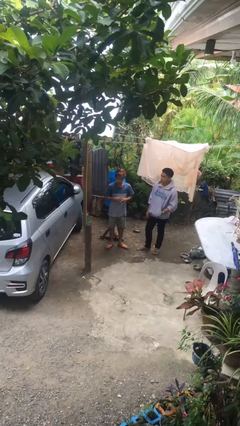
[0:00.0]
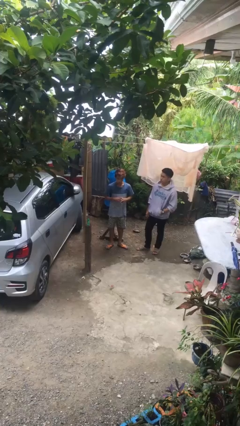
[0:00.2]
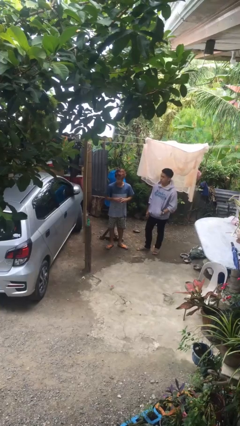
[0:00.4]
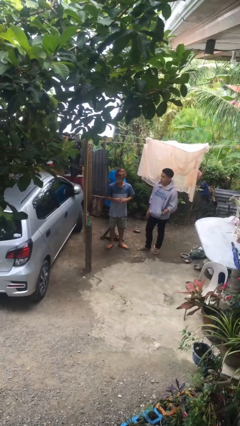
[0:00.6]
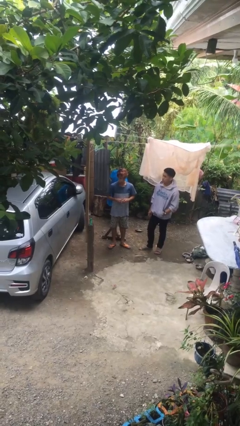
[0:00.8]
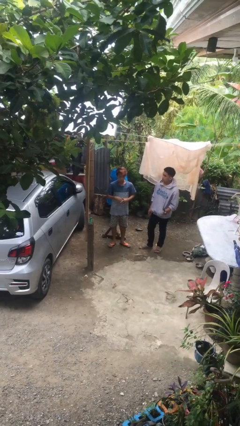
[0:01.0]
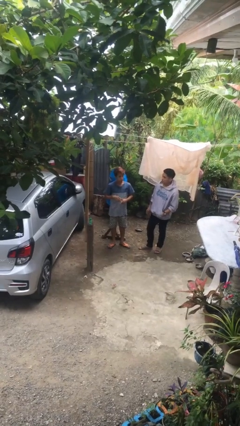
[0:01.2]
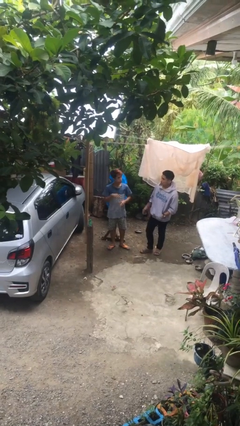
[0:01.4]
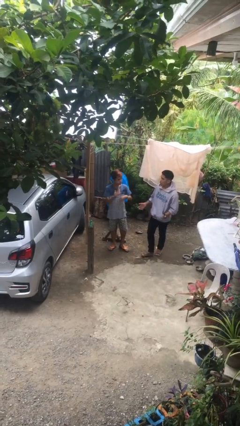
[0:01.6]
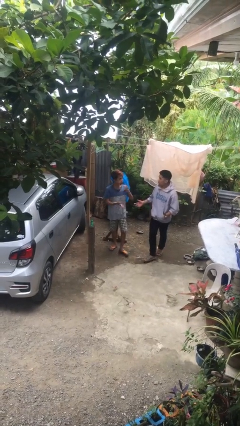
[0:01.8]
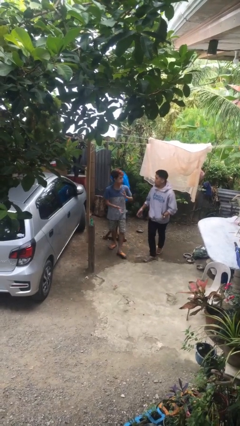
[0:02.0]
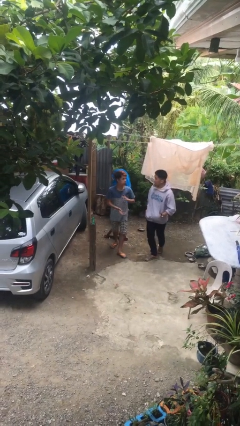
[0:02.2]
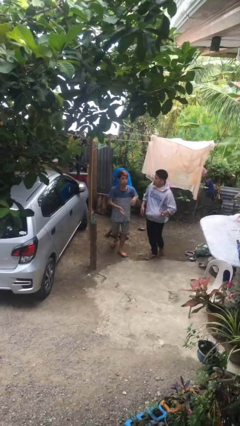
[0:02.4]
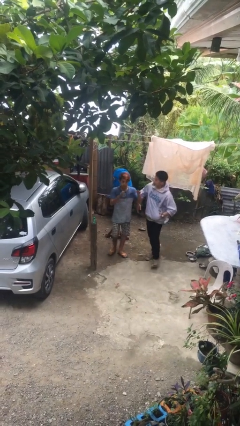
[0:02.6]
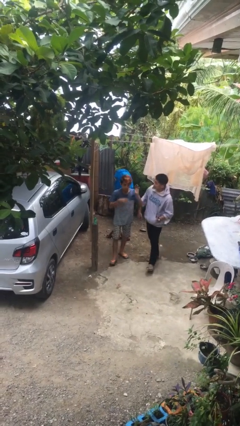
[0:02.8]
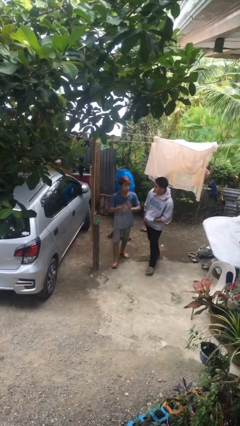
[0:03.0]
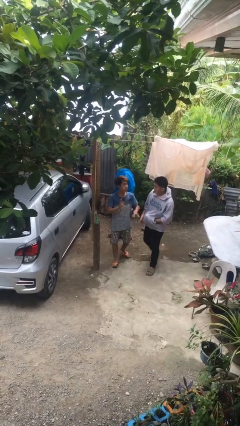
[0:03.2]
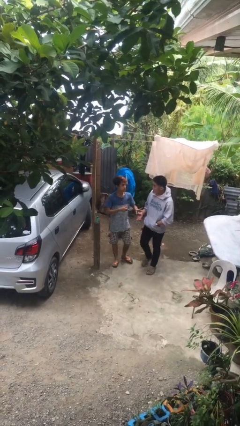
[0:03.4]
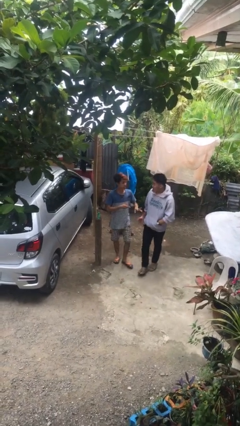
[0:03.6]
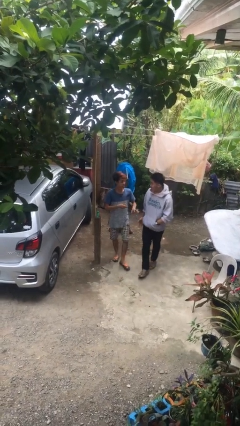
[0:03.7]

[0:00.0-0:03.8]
person talks to person

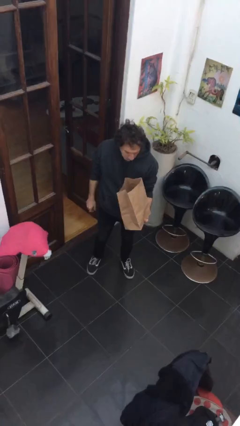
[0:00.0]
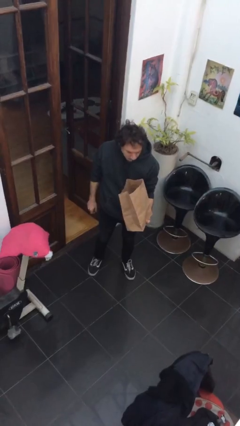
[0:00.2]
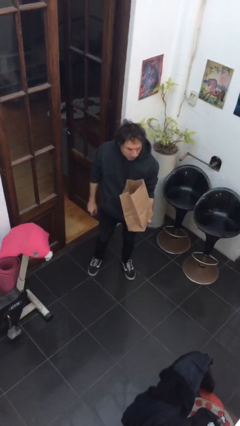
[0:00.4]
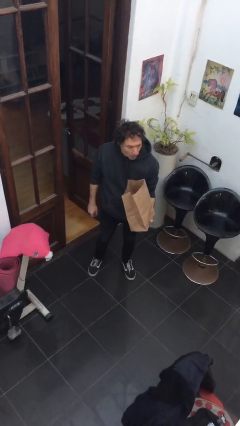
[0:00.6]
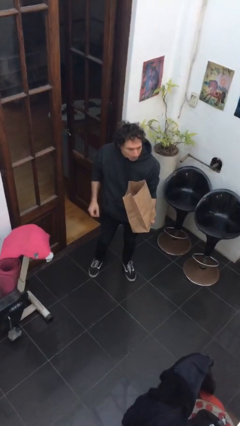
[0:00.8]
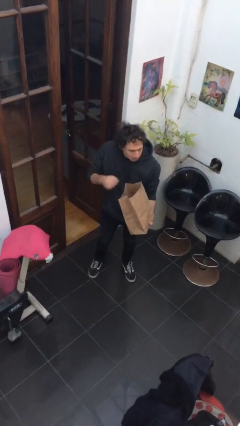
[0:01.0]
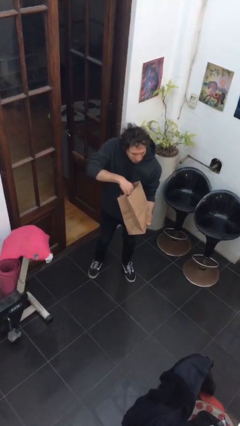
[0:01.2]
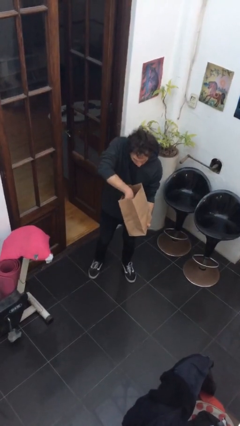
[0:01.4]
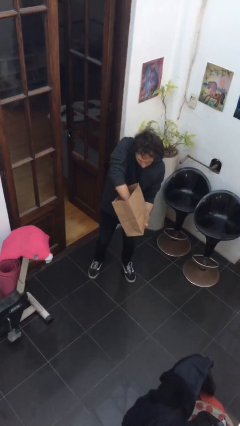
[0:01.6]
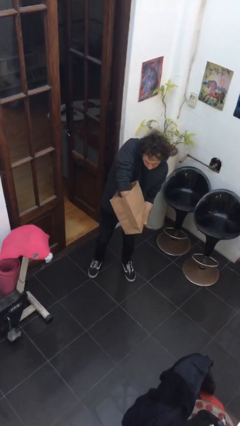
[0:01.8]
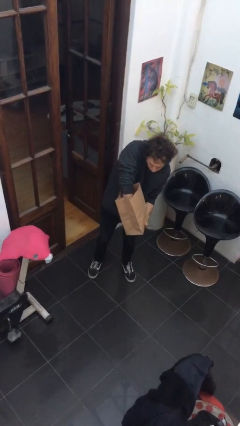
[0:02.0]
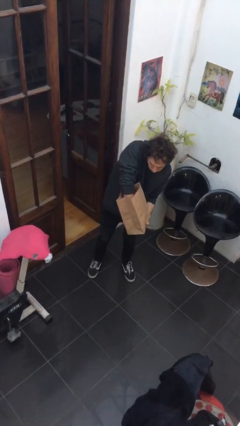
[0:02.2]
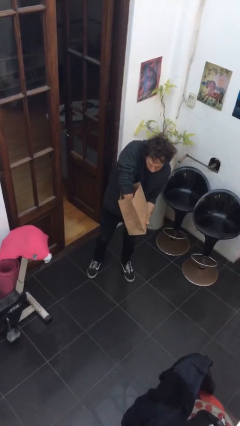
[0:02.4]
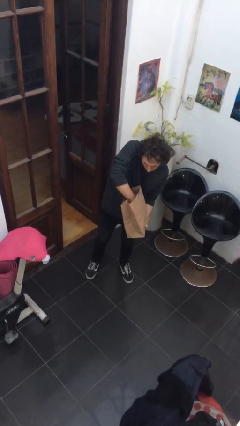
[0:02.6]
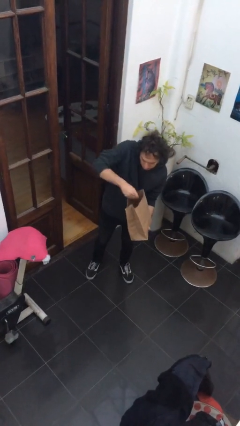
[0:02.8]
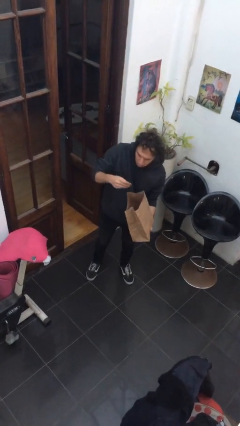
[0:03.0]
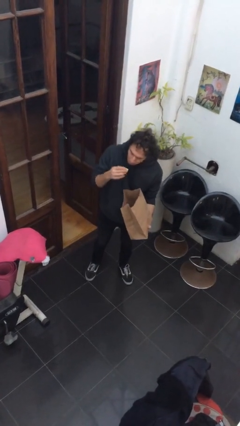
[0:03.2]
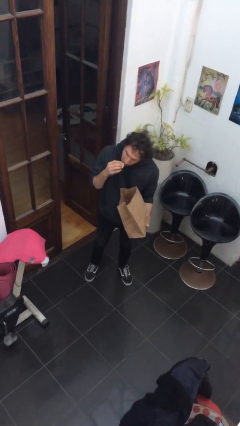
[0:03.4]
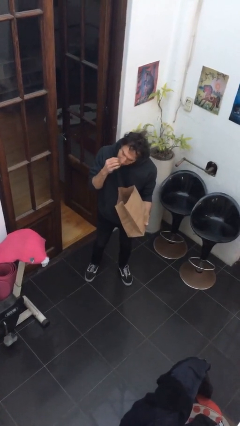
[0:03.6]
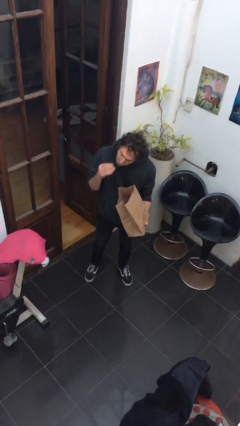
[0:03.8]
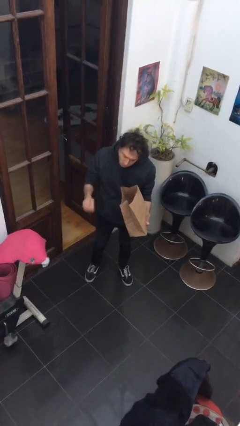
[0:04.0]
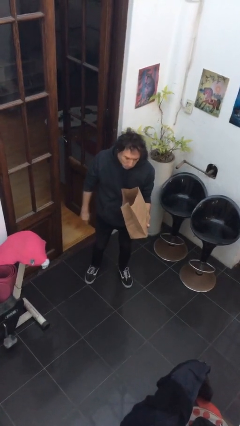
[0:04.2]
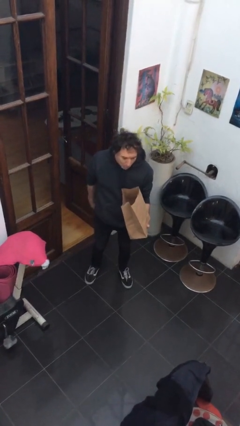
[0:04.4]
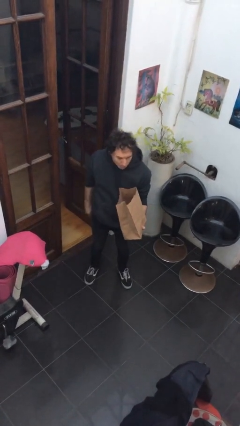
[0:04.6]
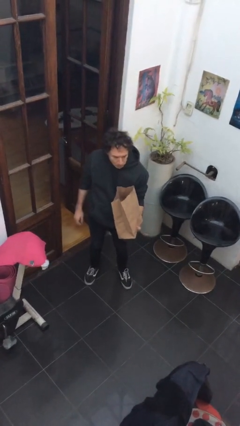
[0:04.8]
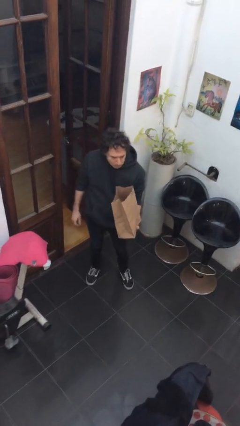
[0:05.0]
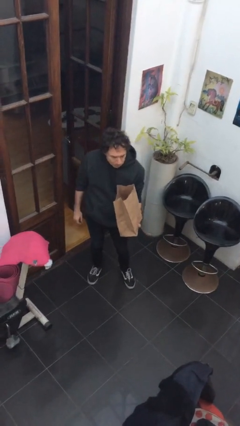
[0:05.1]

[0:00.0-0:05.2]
person eats snack from bag

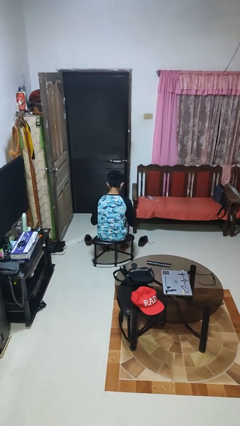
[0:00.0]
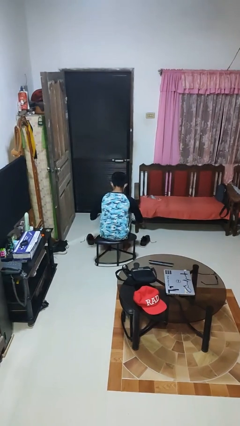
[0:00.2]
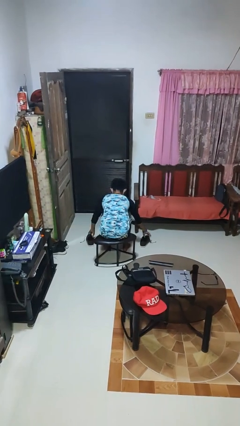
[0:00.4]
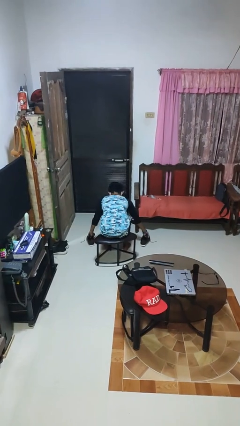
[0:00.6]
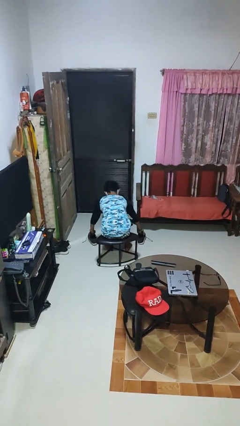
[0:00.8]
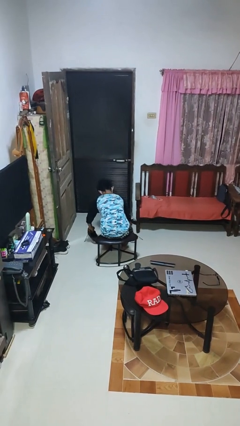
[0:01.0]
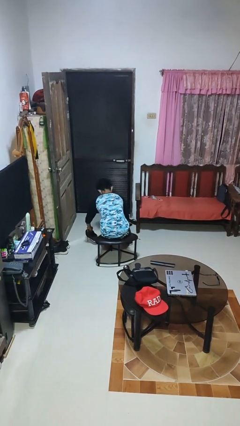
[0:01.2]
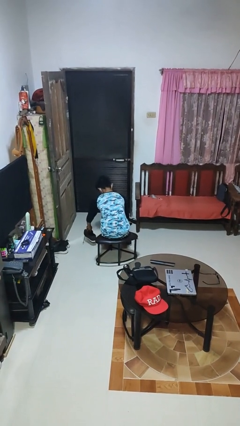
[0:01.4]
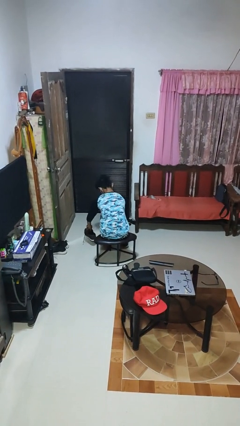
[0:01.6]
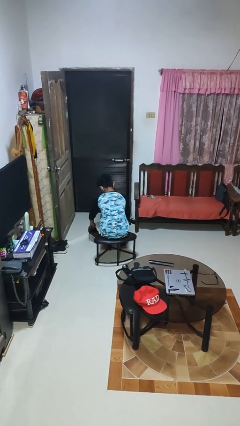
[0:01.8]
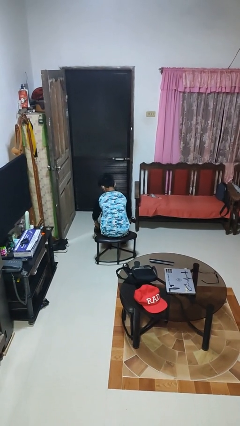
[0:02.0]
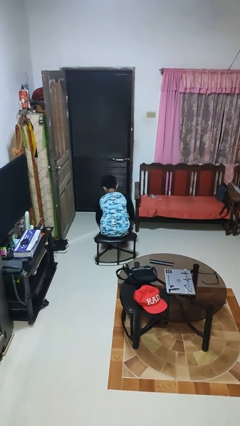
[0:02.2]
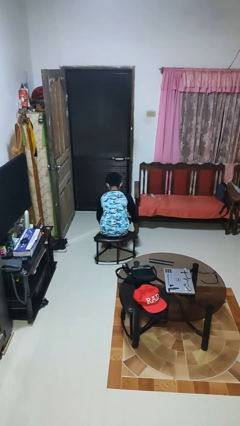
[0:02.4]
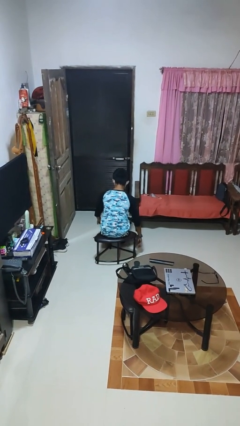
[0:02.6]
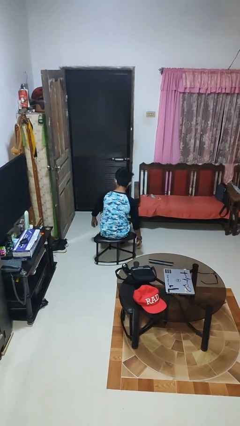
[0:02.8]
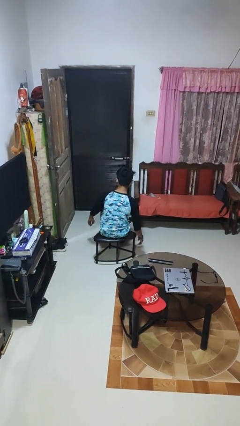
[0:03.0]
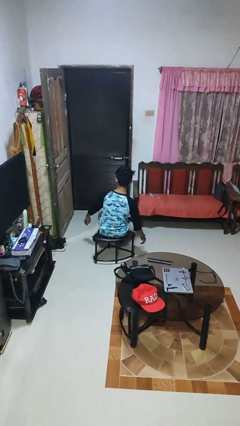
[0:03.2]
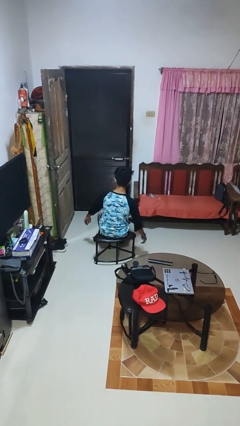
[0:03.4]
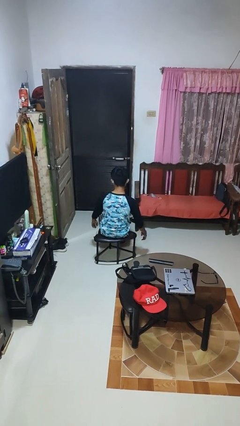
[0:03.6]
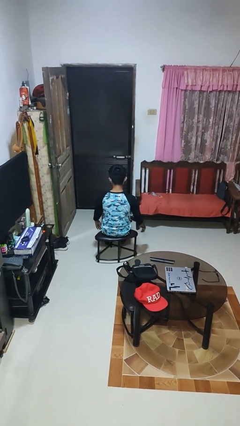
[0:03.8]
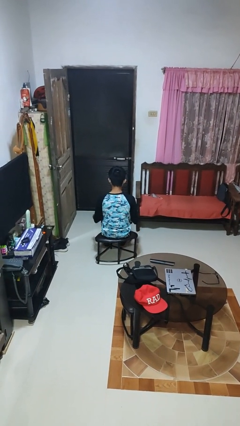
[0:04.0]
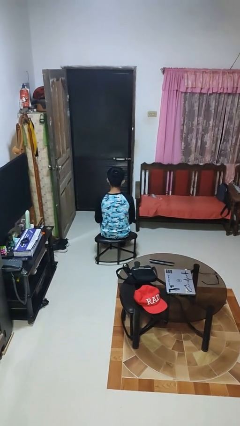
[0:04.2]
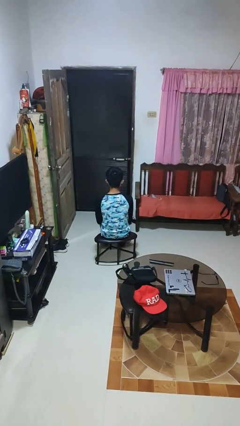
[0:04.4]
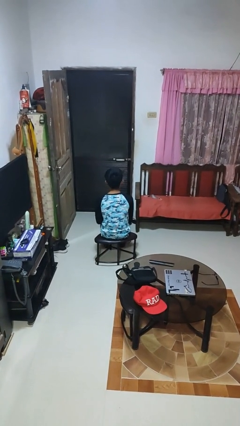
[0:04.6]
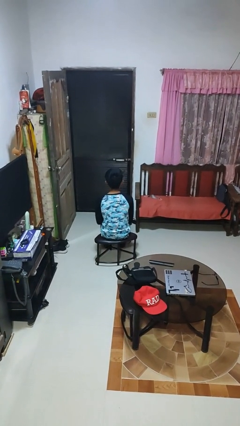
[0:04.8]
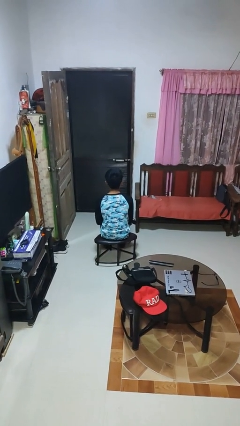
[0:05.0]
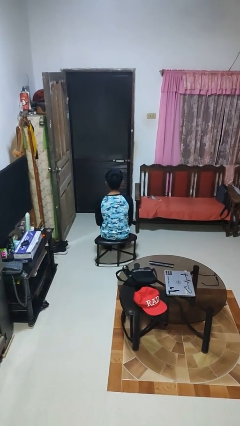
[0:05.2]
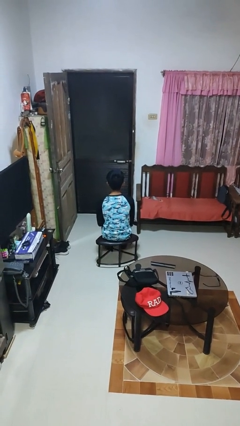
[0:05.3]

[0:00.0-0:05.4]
person puts on shoes

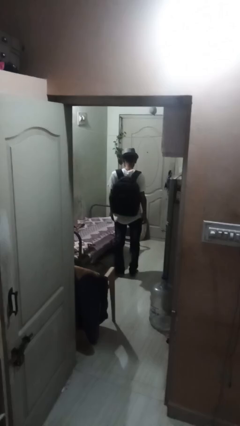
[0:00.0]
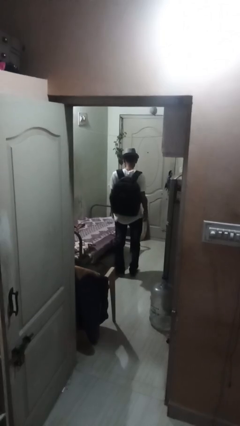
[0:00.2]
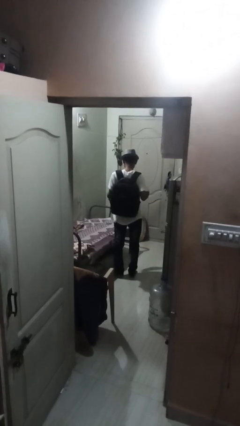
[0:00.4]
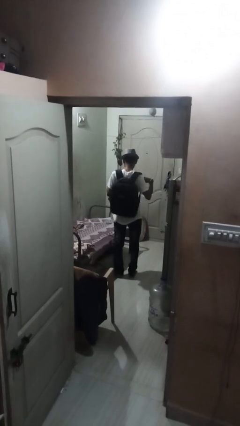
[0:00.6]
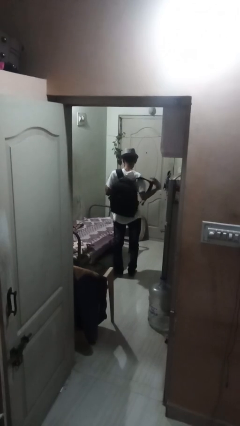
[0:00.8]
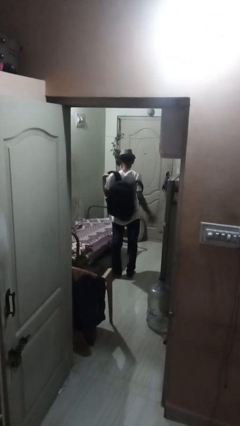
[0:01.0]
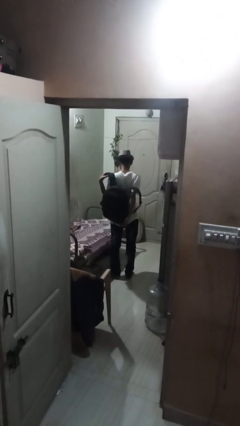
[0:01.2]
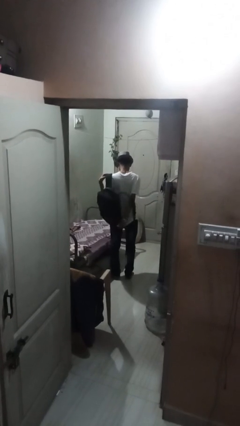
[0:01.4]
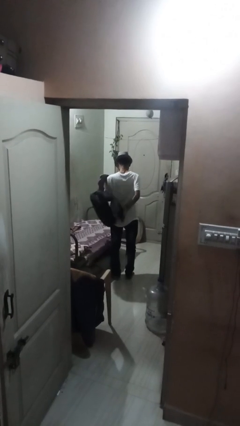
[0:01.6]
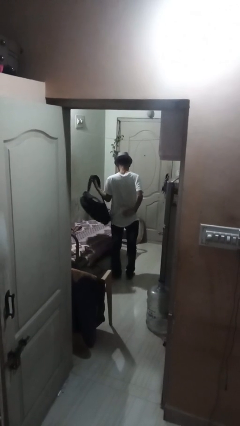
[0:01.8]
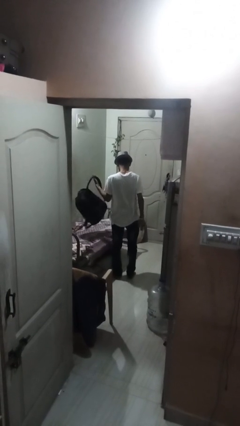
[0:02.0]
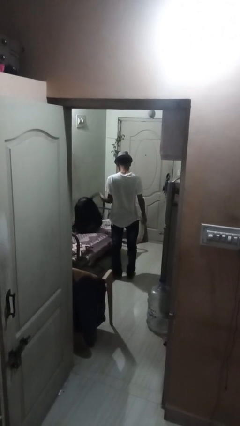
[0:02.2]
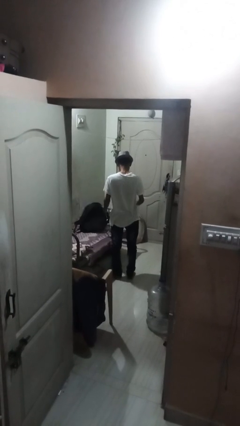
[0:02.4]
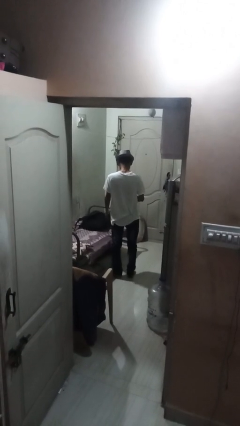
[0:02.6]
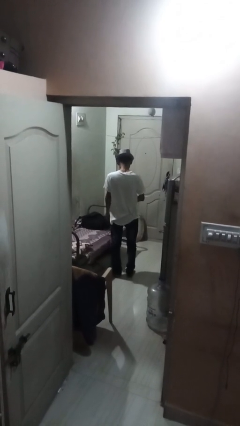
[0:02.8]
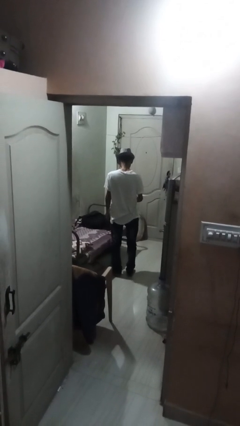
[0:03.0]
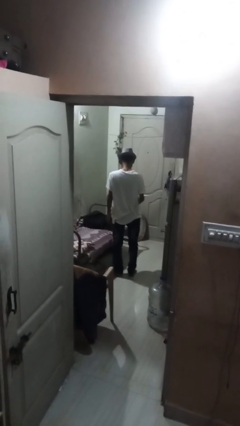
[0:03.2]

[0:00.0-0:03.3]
person takes off backpack

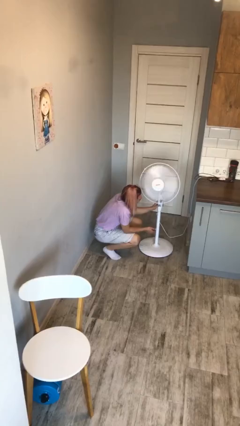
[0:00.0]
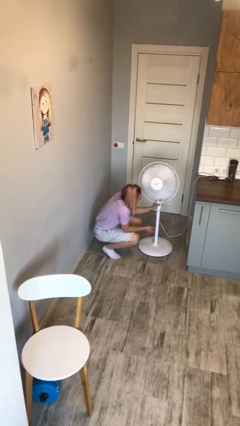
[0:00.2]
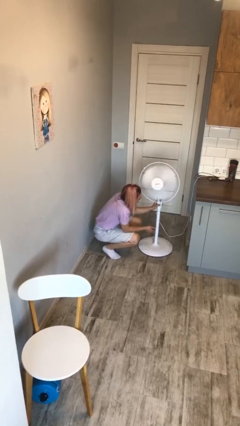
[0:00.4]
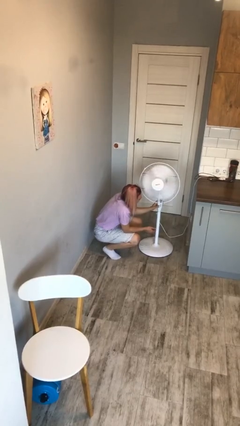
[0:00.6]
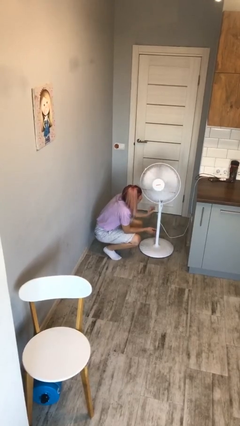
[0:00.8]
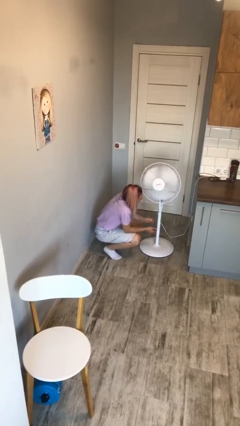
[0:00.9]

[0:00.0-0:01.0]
person turns off fan
